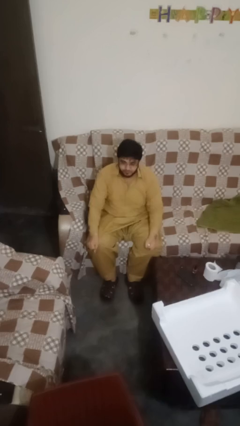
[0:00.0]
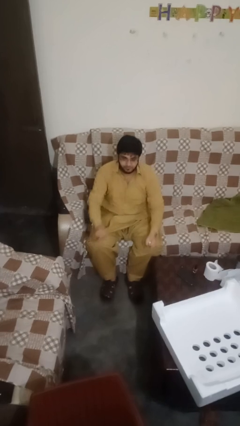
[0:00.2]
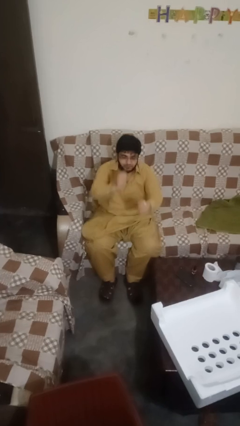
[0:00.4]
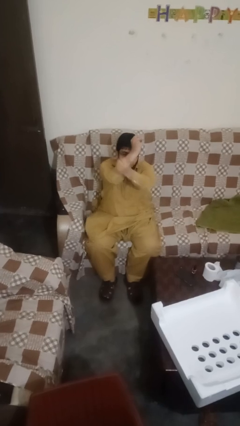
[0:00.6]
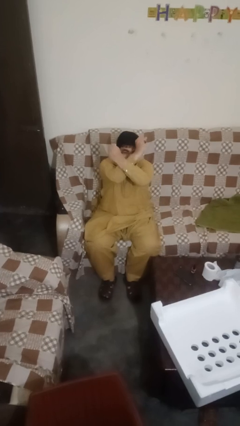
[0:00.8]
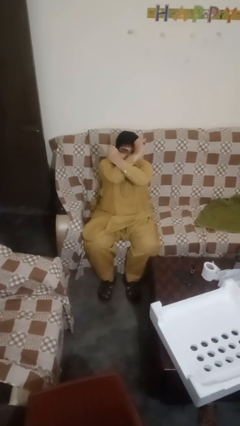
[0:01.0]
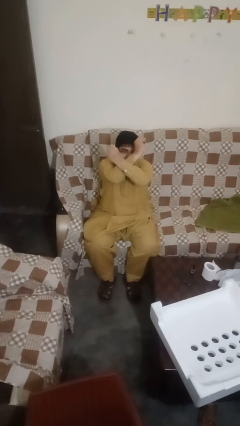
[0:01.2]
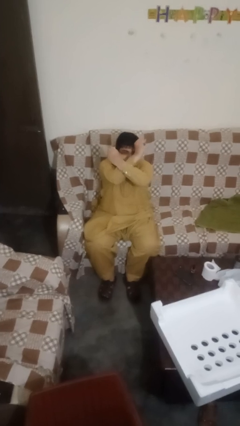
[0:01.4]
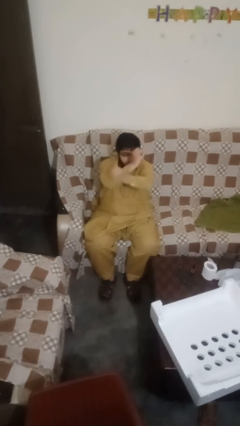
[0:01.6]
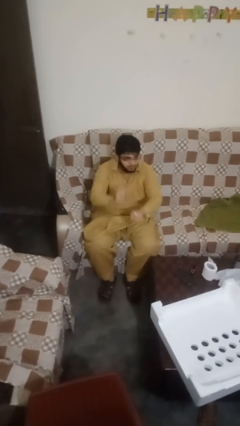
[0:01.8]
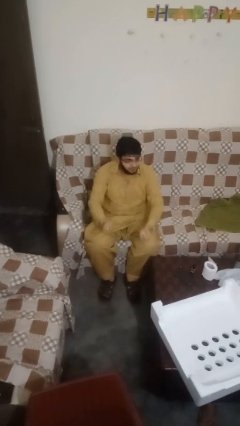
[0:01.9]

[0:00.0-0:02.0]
person gestures arms x

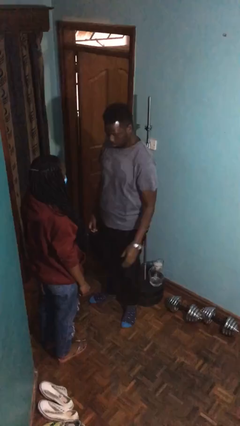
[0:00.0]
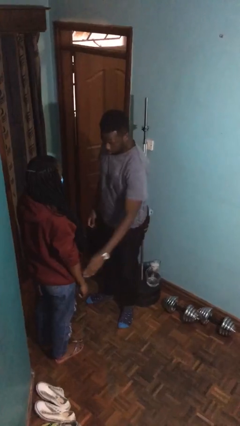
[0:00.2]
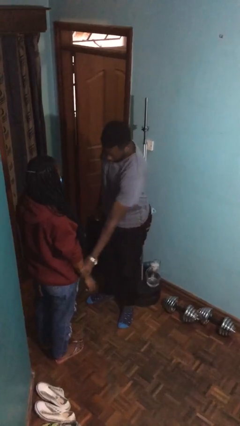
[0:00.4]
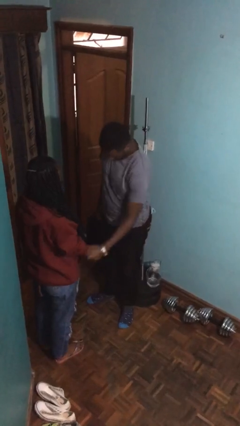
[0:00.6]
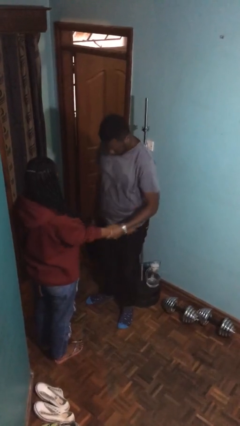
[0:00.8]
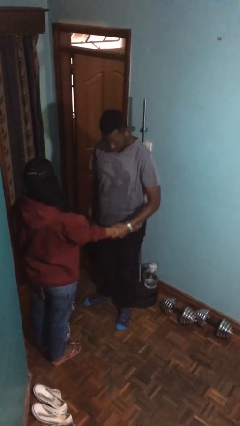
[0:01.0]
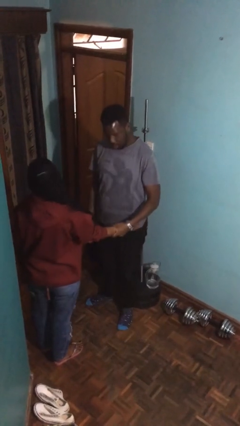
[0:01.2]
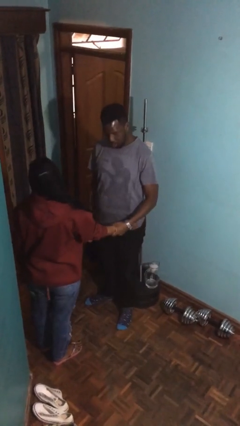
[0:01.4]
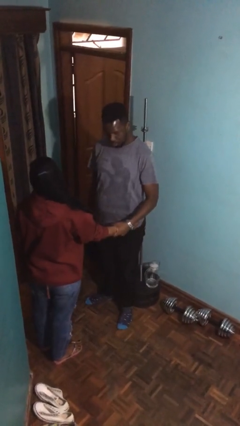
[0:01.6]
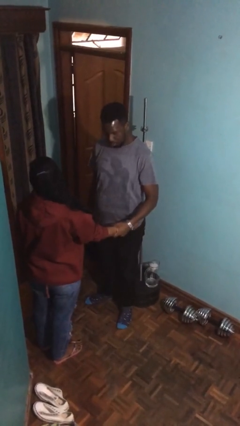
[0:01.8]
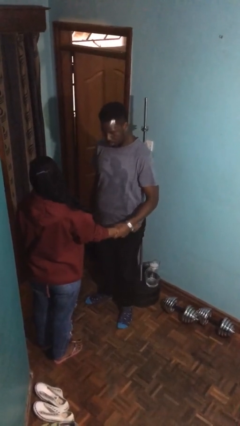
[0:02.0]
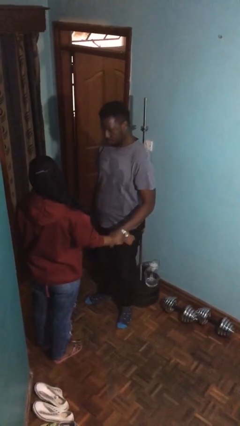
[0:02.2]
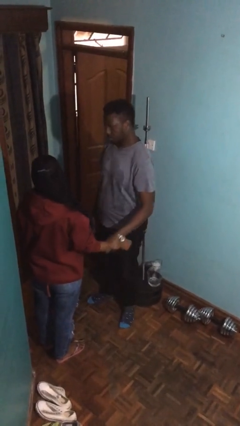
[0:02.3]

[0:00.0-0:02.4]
person grabs person by forearm

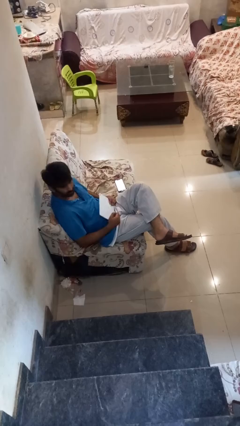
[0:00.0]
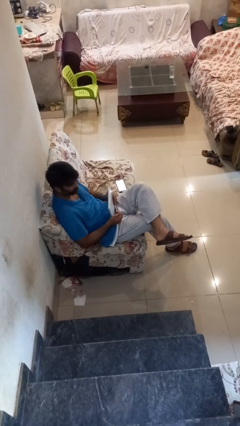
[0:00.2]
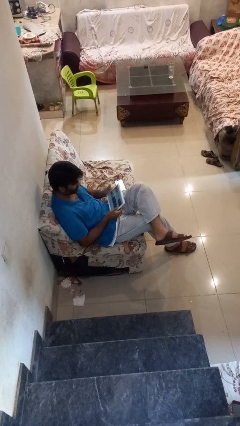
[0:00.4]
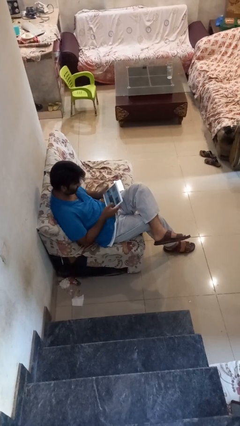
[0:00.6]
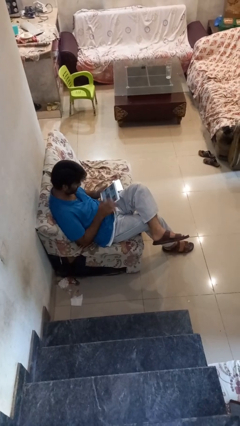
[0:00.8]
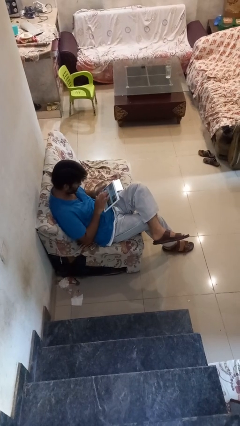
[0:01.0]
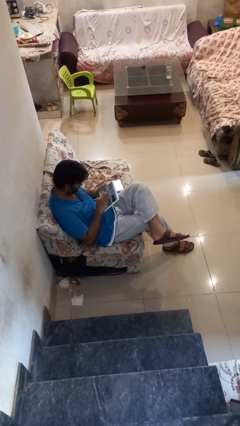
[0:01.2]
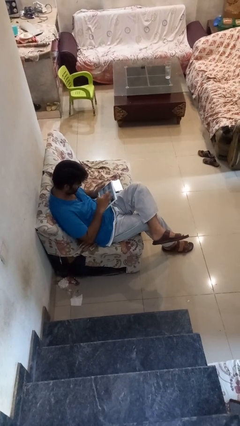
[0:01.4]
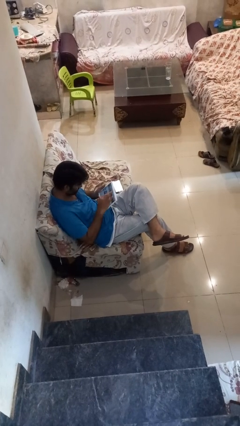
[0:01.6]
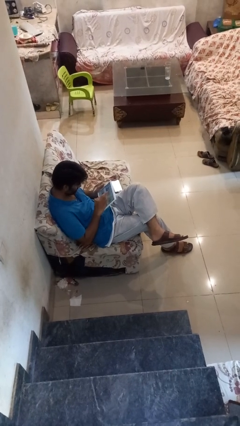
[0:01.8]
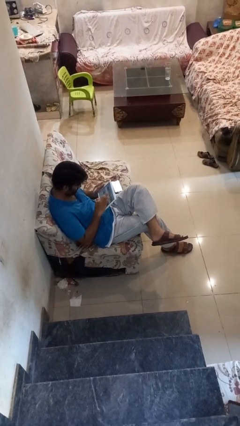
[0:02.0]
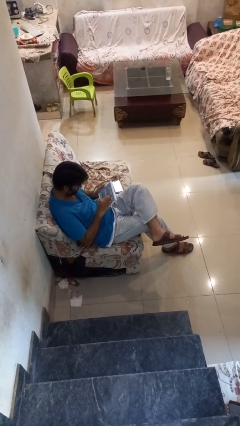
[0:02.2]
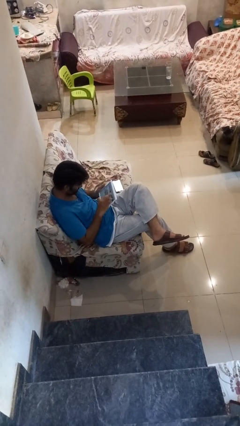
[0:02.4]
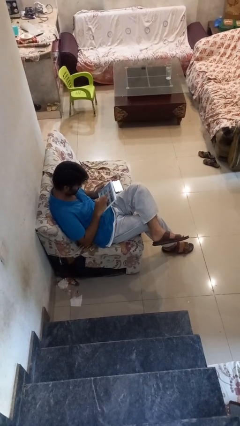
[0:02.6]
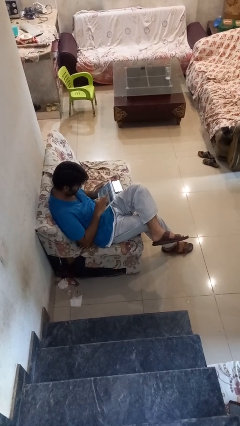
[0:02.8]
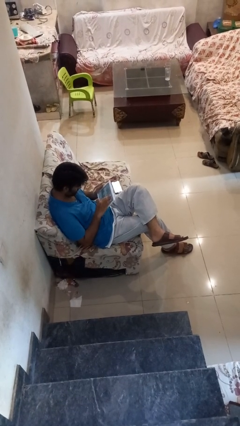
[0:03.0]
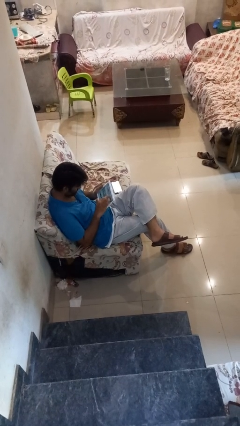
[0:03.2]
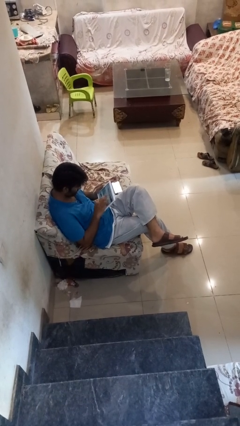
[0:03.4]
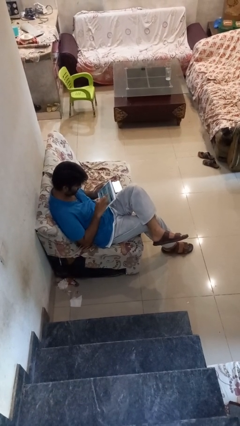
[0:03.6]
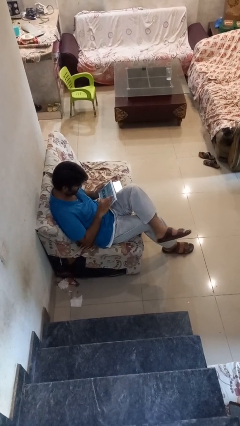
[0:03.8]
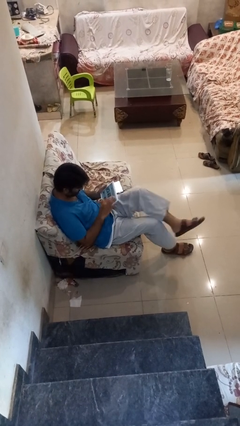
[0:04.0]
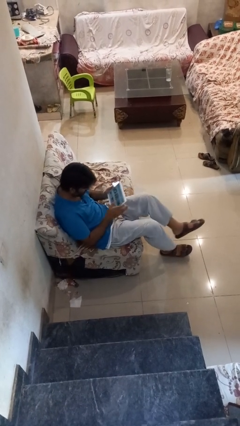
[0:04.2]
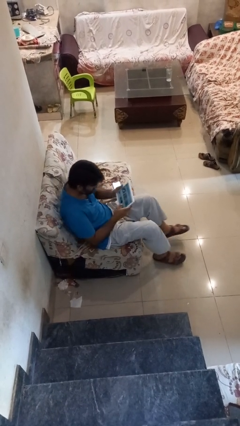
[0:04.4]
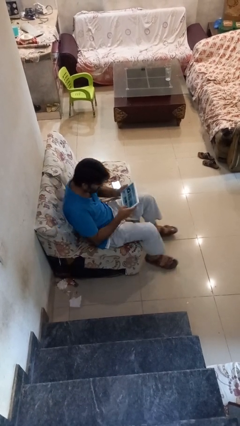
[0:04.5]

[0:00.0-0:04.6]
person interacts with tablet

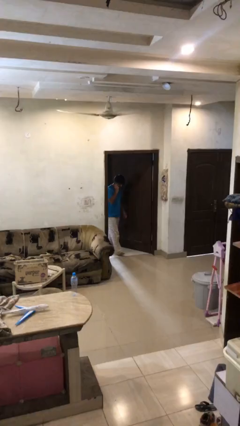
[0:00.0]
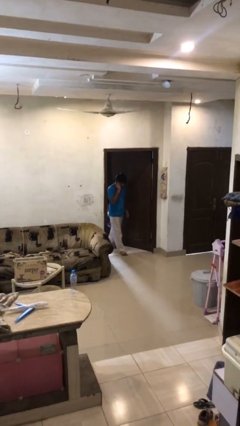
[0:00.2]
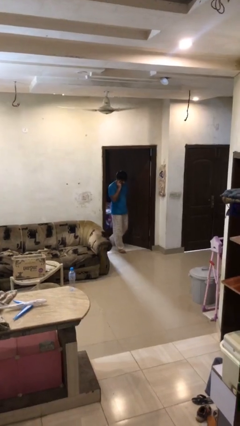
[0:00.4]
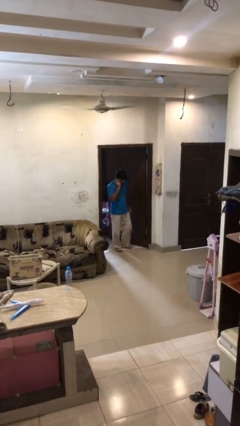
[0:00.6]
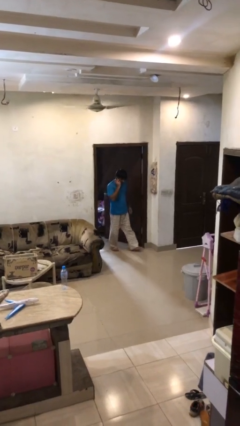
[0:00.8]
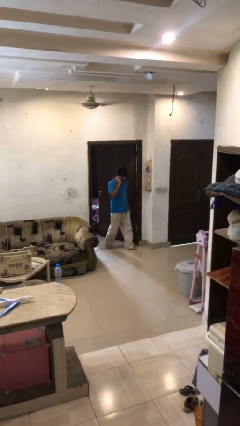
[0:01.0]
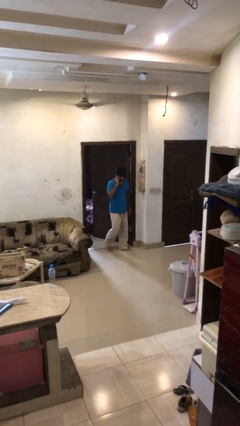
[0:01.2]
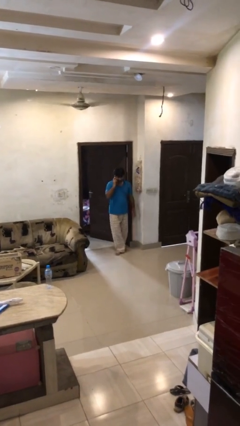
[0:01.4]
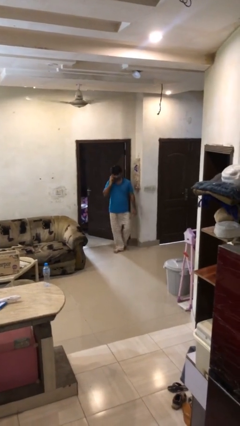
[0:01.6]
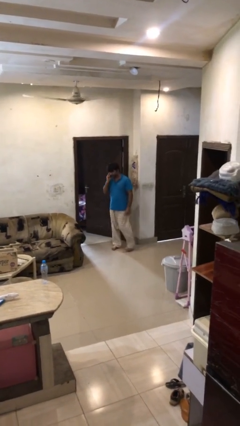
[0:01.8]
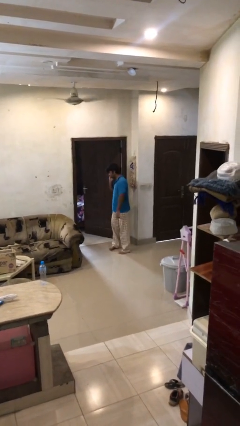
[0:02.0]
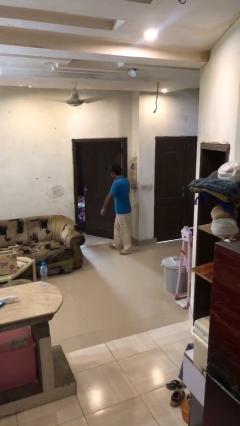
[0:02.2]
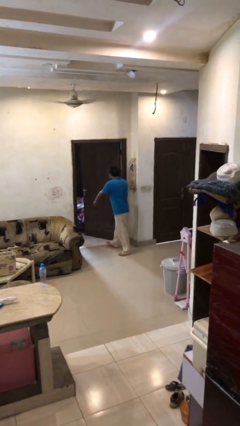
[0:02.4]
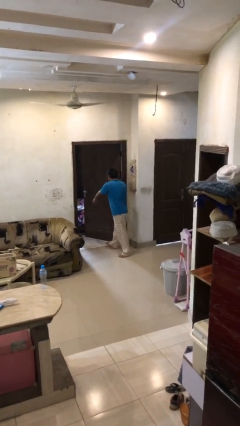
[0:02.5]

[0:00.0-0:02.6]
person enters scene through structure

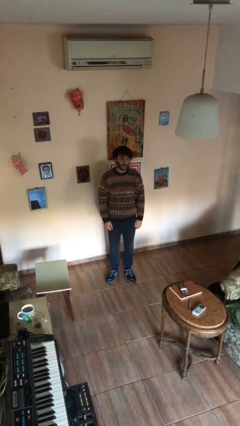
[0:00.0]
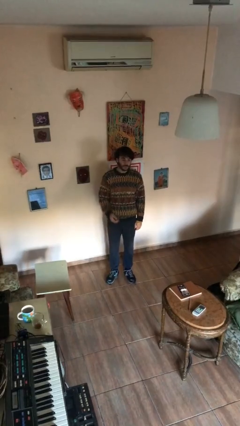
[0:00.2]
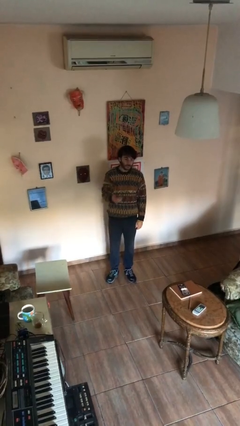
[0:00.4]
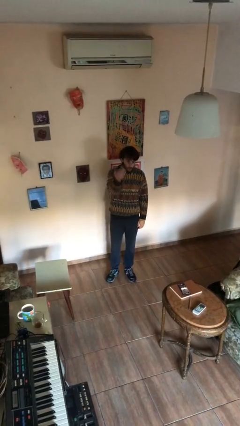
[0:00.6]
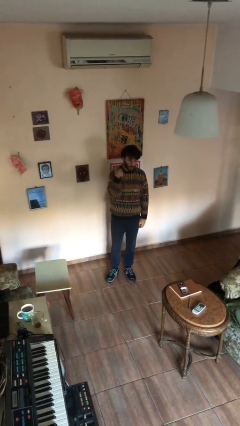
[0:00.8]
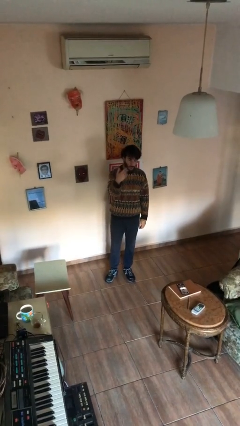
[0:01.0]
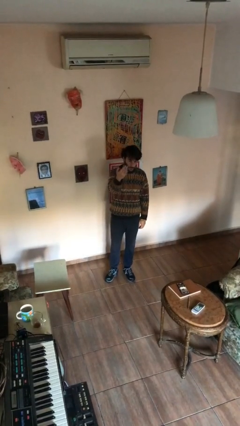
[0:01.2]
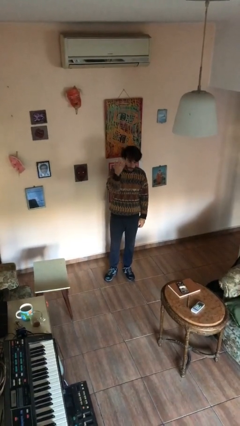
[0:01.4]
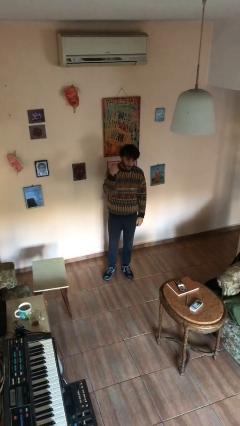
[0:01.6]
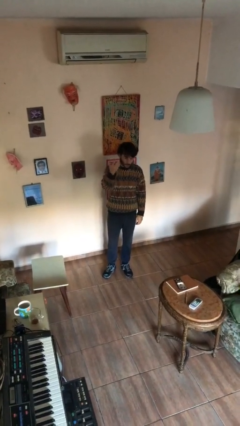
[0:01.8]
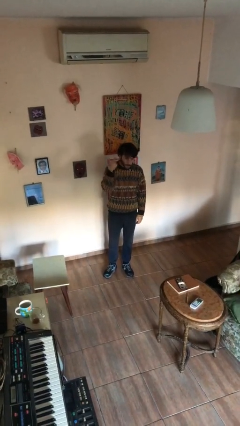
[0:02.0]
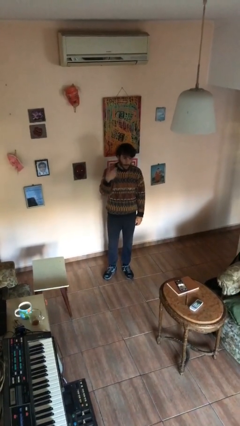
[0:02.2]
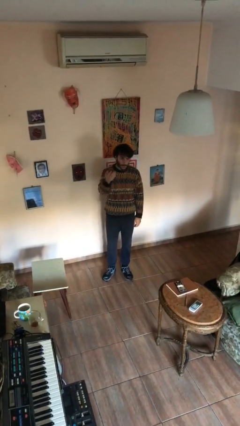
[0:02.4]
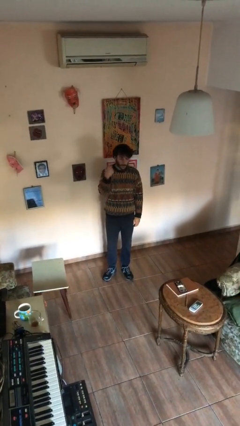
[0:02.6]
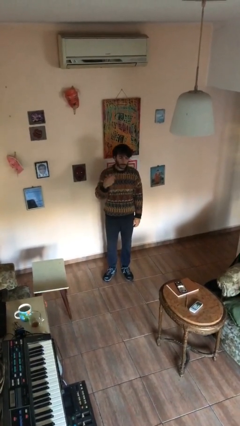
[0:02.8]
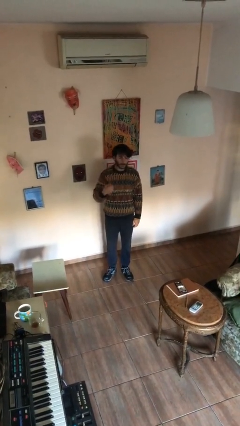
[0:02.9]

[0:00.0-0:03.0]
person gestures come here

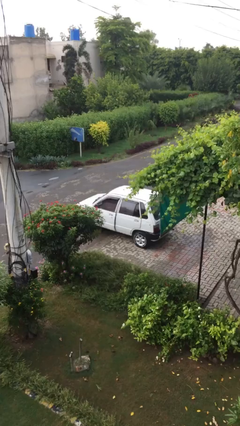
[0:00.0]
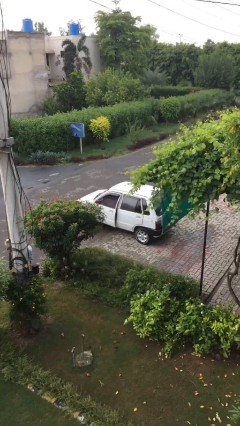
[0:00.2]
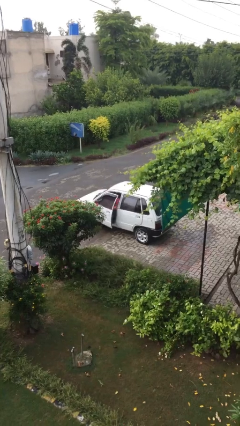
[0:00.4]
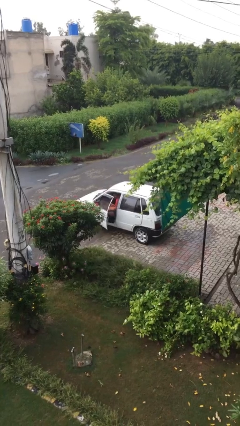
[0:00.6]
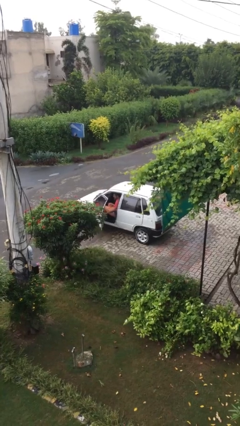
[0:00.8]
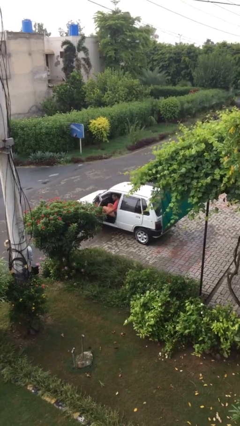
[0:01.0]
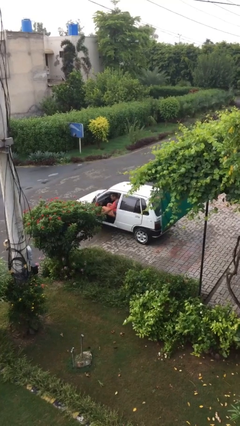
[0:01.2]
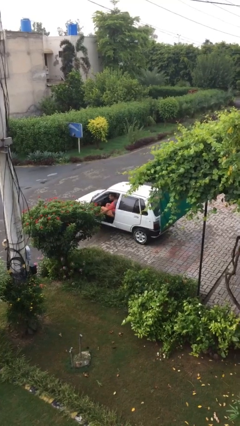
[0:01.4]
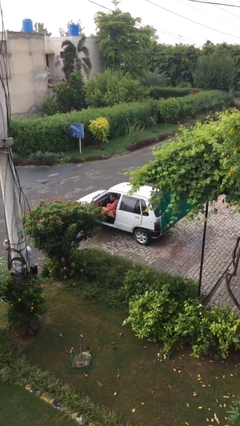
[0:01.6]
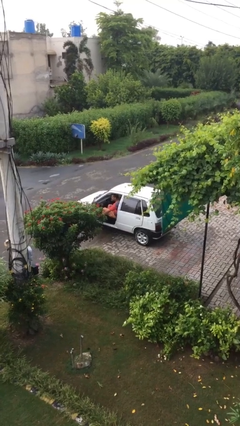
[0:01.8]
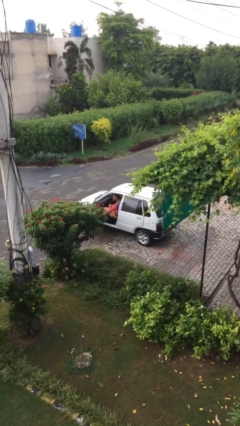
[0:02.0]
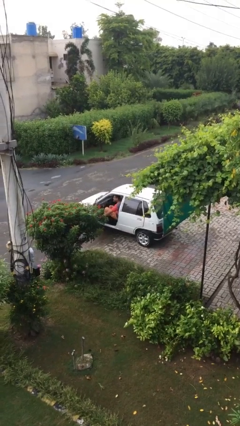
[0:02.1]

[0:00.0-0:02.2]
person opens car door

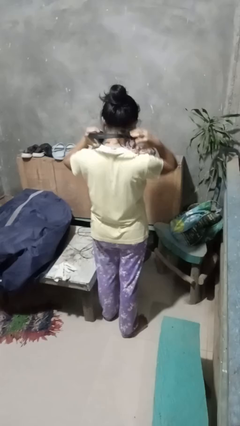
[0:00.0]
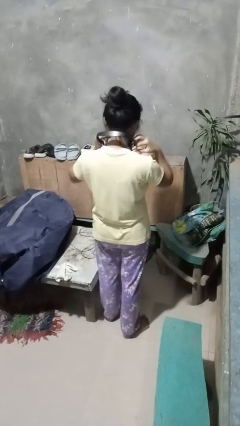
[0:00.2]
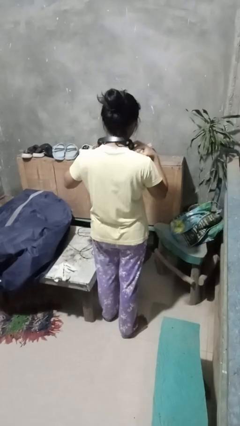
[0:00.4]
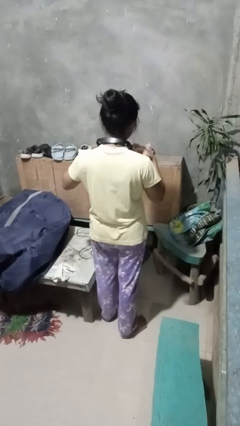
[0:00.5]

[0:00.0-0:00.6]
person takes off headphones
